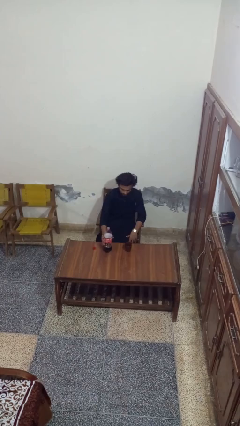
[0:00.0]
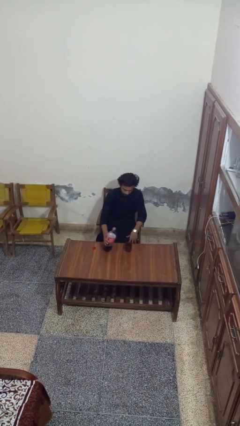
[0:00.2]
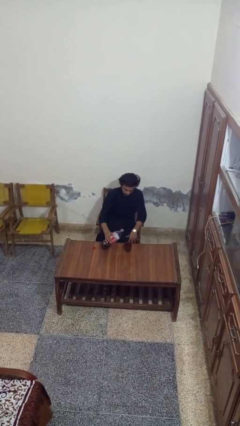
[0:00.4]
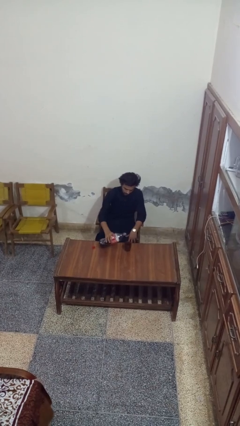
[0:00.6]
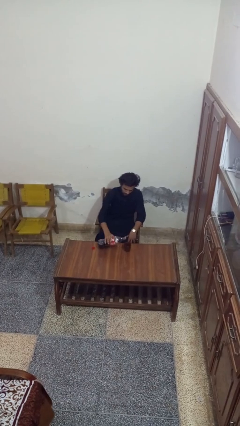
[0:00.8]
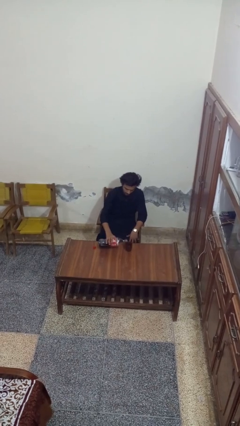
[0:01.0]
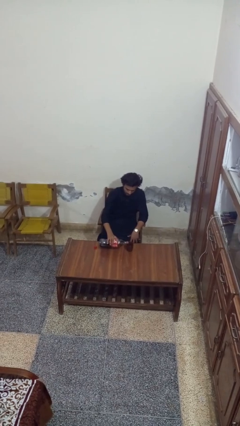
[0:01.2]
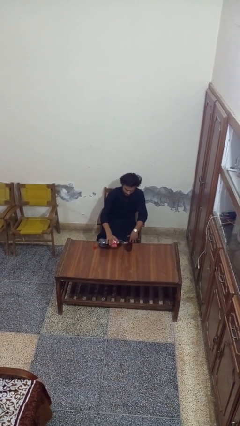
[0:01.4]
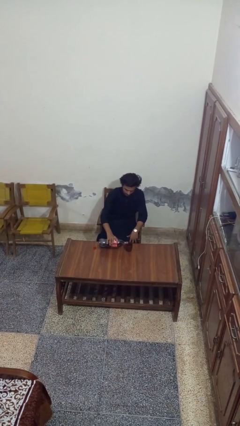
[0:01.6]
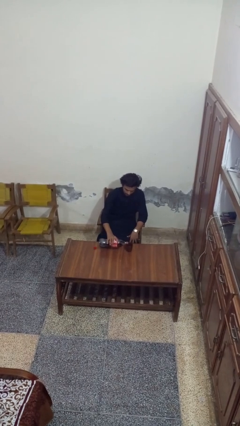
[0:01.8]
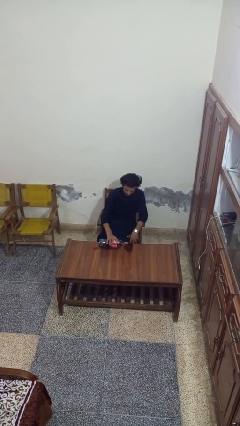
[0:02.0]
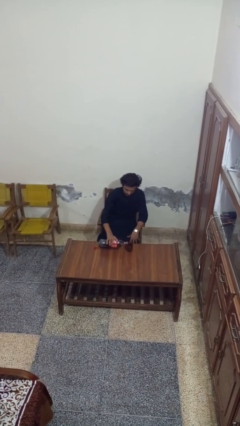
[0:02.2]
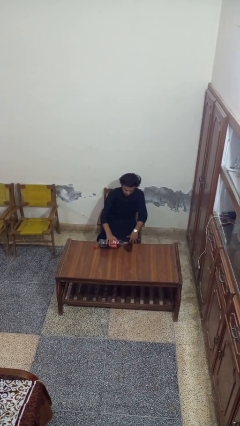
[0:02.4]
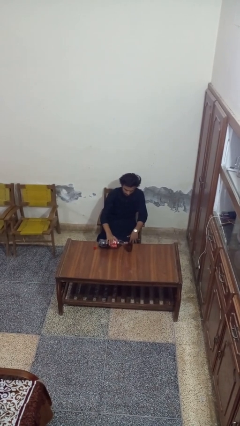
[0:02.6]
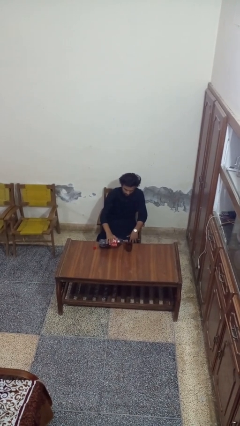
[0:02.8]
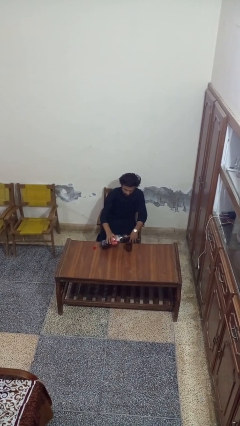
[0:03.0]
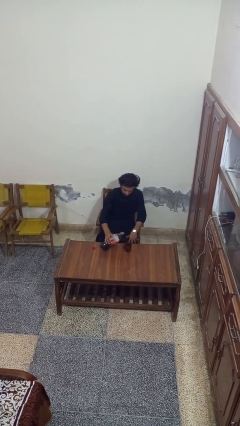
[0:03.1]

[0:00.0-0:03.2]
person pours liquid into cup

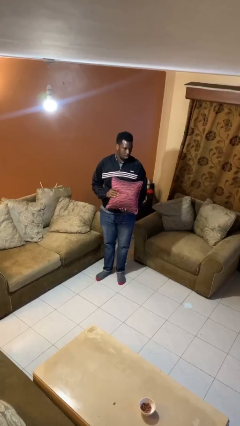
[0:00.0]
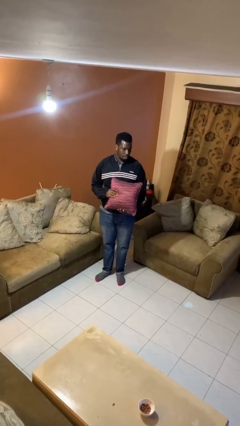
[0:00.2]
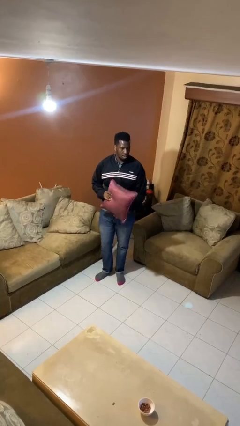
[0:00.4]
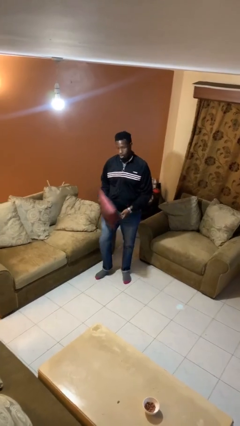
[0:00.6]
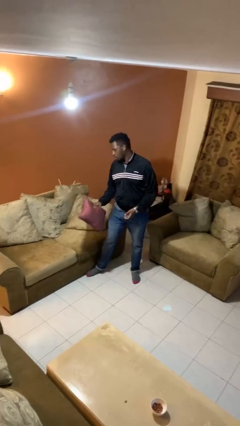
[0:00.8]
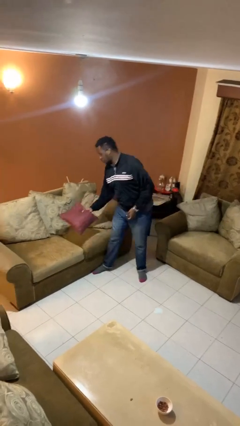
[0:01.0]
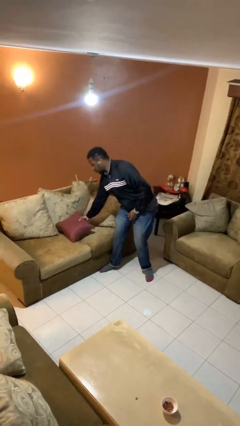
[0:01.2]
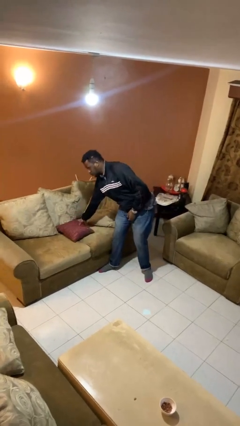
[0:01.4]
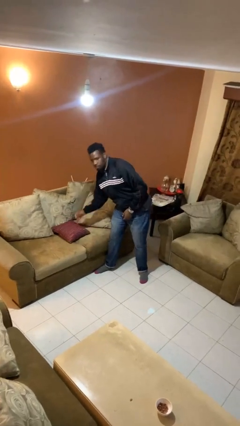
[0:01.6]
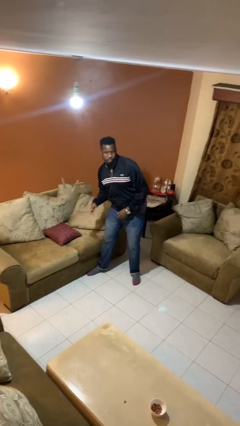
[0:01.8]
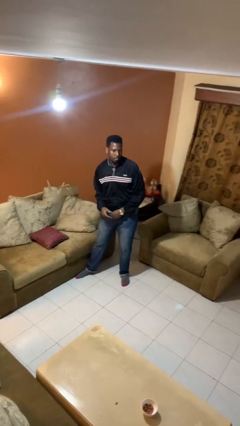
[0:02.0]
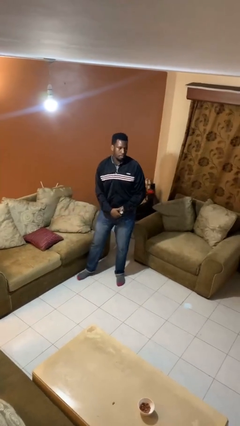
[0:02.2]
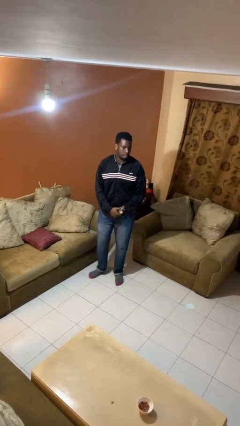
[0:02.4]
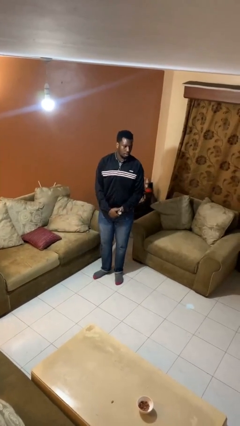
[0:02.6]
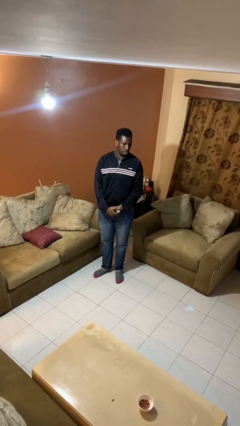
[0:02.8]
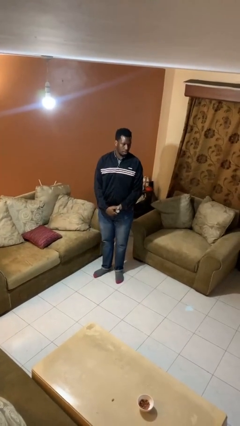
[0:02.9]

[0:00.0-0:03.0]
person puts down object on couch

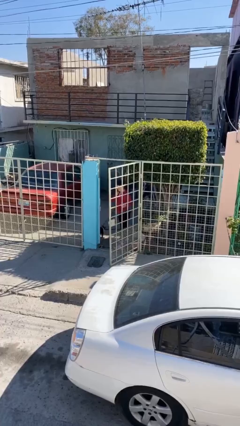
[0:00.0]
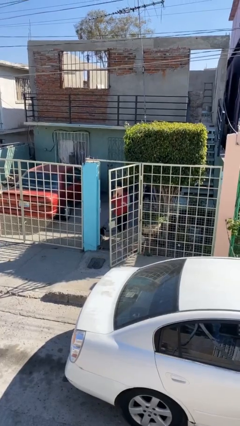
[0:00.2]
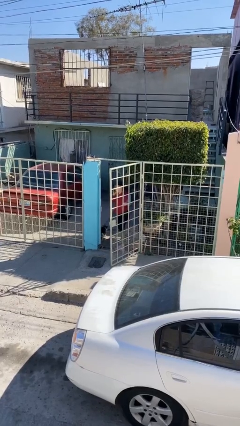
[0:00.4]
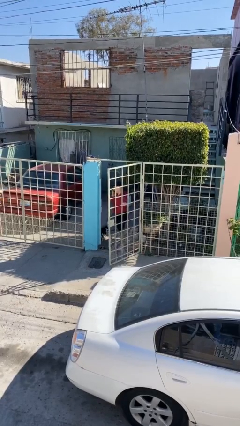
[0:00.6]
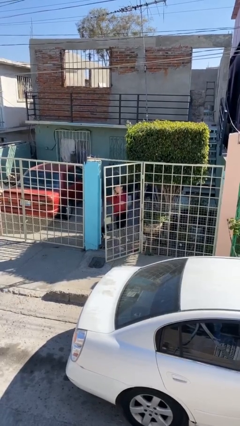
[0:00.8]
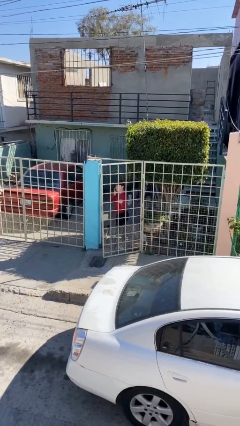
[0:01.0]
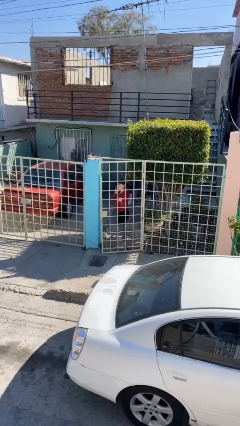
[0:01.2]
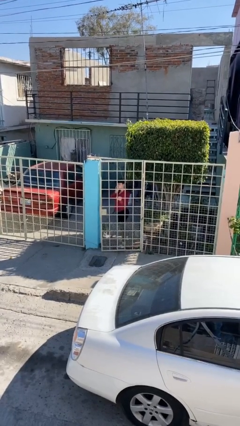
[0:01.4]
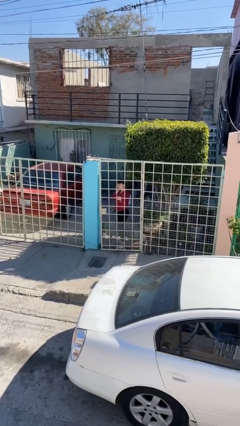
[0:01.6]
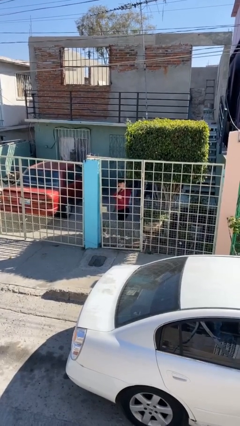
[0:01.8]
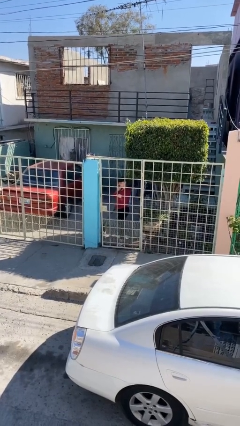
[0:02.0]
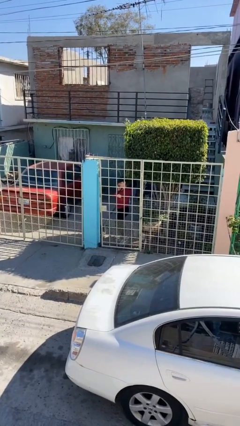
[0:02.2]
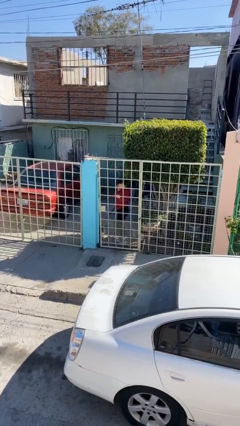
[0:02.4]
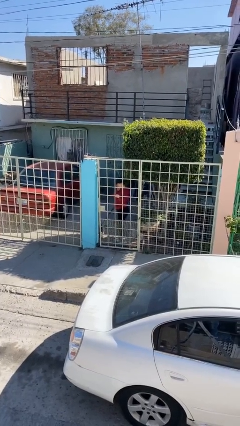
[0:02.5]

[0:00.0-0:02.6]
person closes facility door

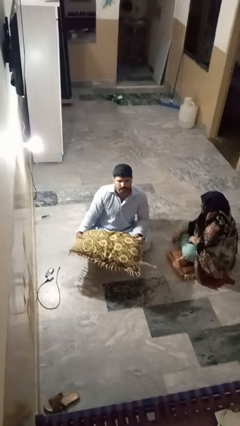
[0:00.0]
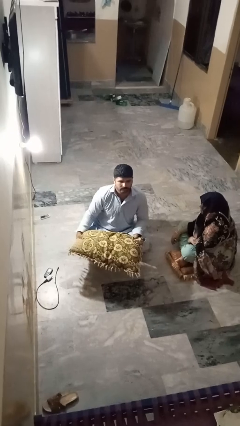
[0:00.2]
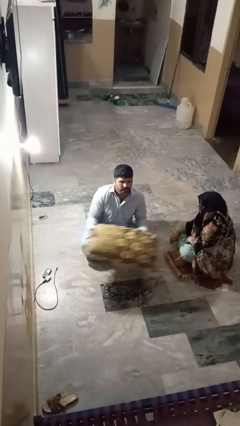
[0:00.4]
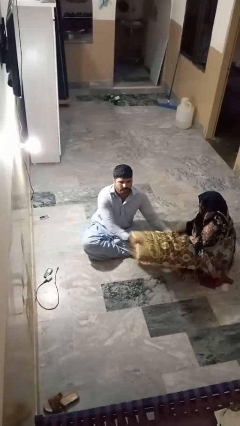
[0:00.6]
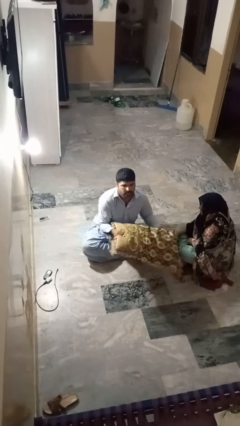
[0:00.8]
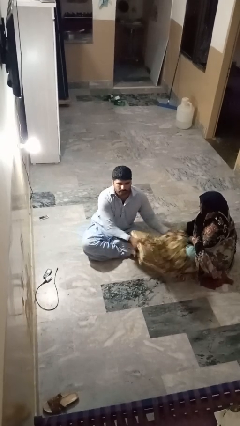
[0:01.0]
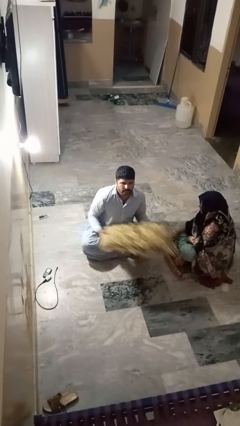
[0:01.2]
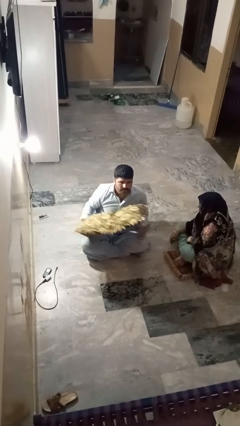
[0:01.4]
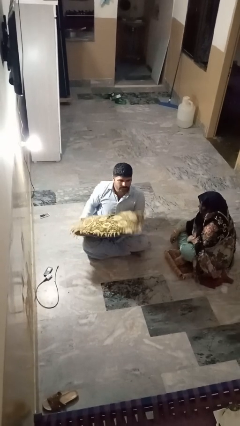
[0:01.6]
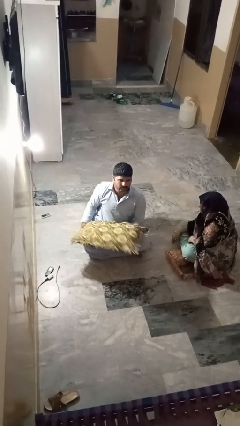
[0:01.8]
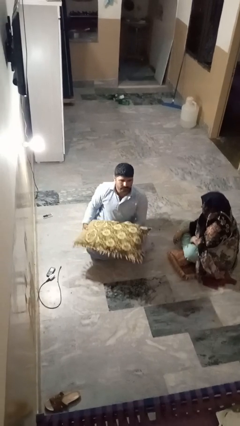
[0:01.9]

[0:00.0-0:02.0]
person hits person with pillow

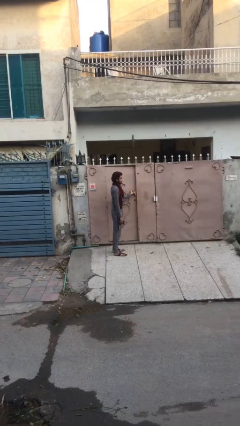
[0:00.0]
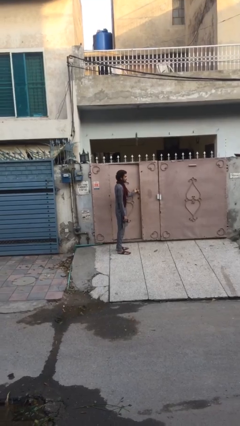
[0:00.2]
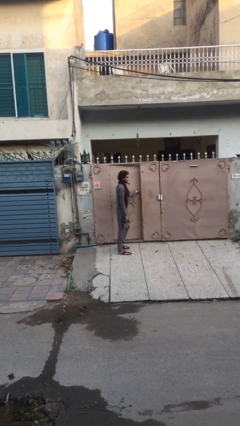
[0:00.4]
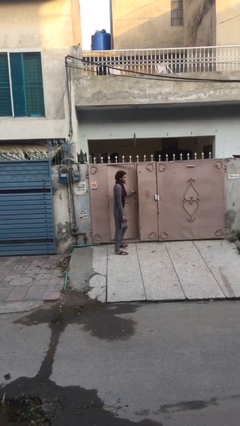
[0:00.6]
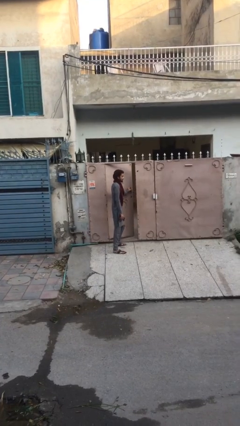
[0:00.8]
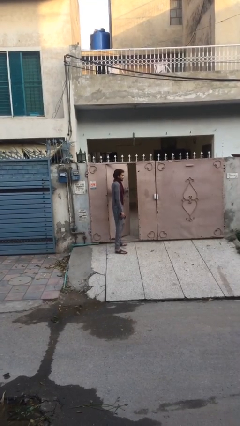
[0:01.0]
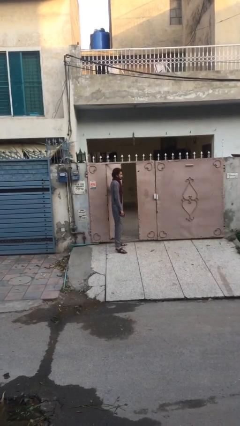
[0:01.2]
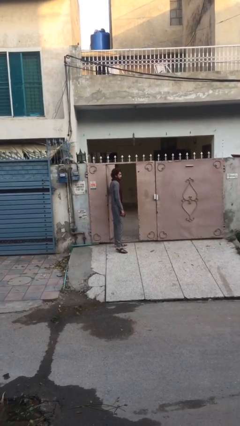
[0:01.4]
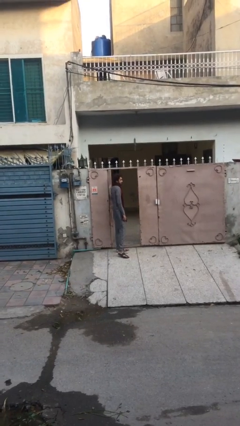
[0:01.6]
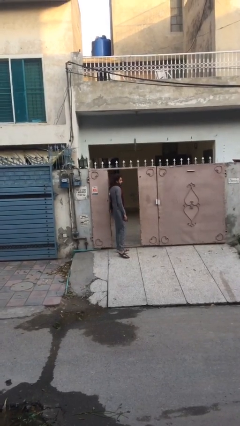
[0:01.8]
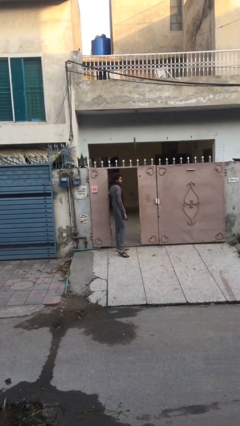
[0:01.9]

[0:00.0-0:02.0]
person opens facility door

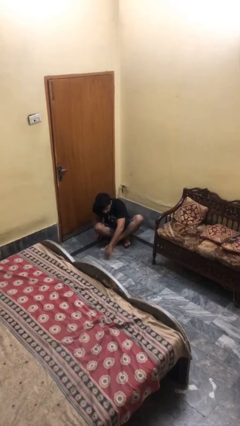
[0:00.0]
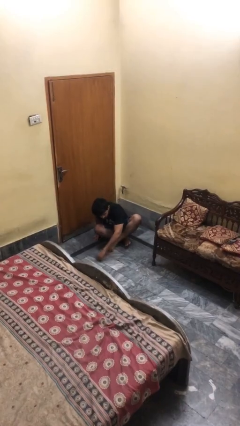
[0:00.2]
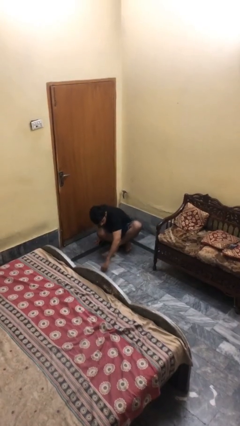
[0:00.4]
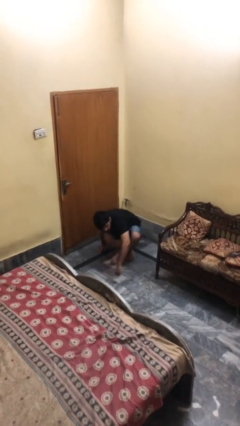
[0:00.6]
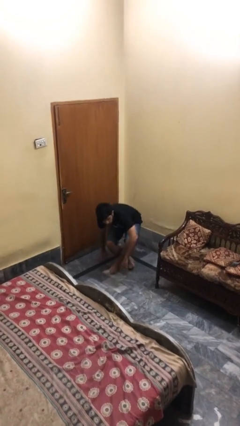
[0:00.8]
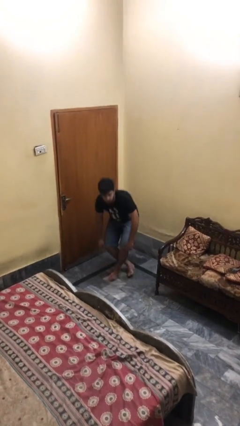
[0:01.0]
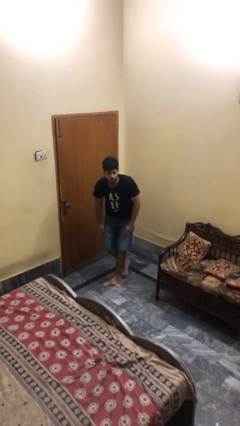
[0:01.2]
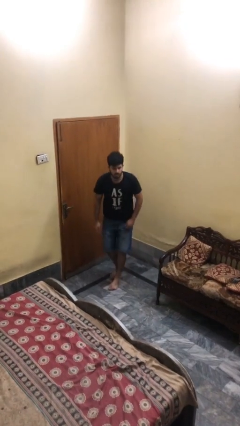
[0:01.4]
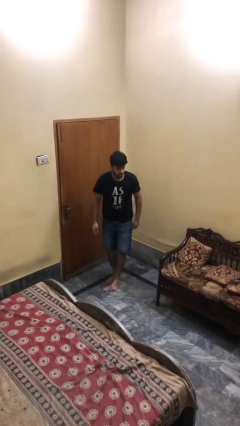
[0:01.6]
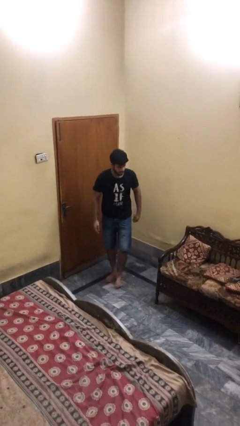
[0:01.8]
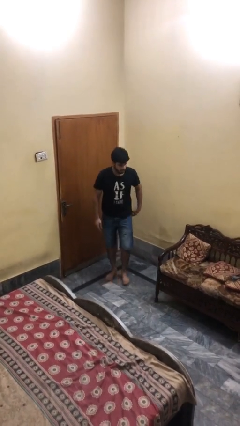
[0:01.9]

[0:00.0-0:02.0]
person stands up from floor

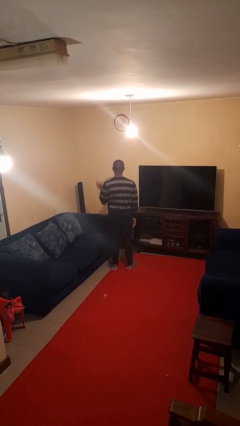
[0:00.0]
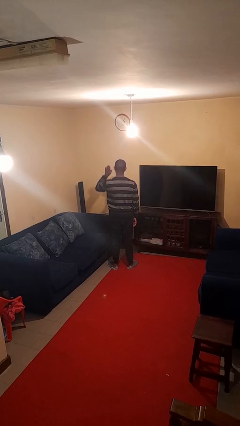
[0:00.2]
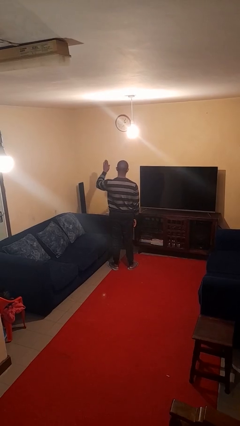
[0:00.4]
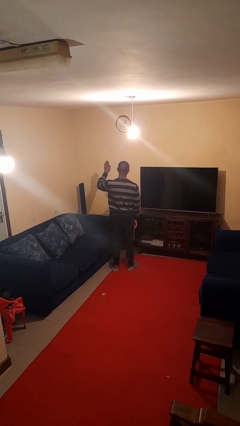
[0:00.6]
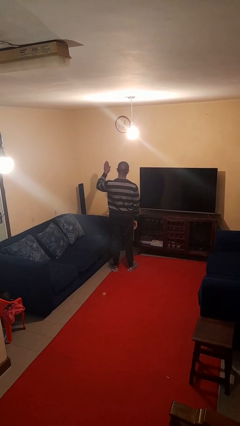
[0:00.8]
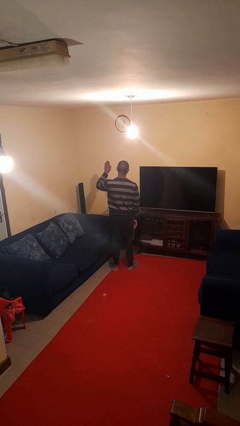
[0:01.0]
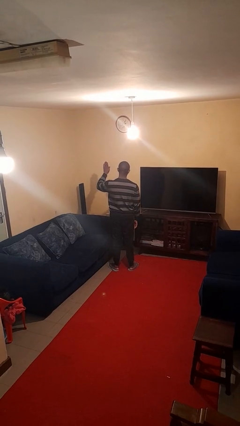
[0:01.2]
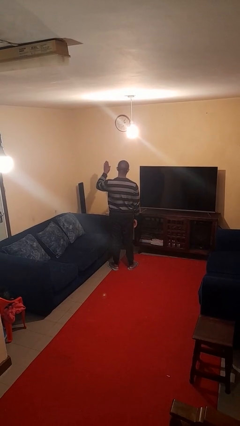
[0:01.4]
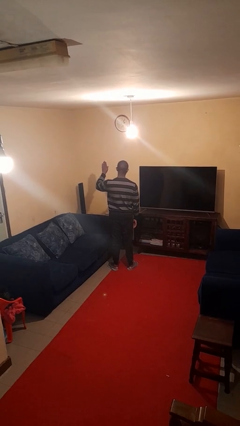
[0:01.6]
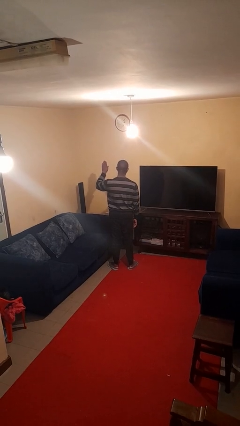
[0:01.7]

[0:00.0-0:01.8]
person gestures stop

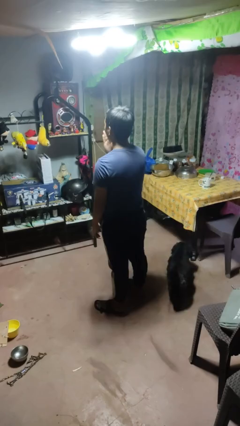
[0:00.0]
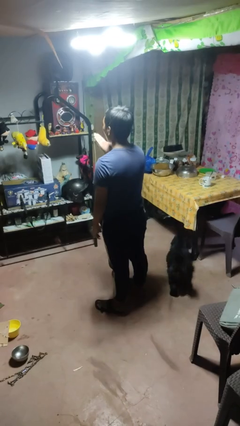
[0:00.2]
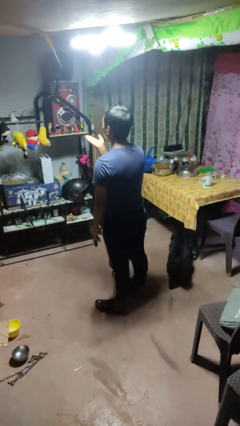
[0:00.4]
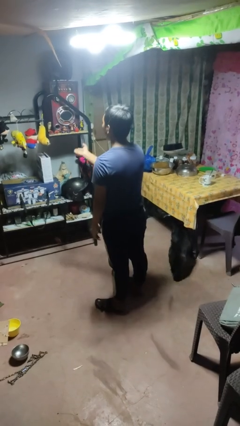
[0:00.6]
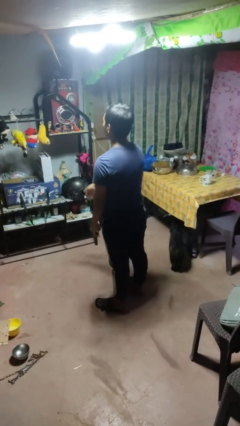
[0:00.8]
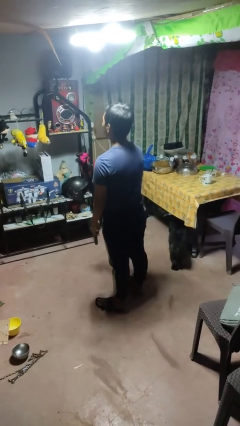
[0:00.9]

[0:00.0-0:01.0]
person gestures blow kiss
